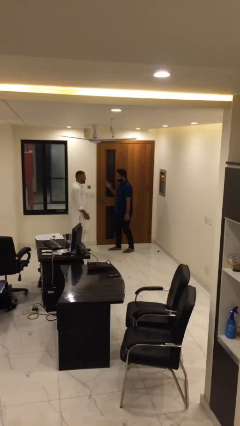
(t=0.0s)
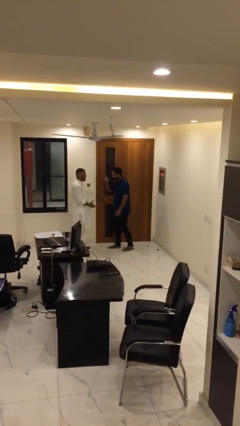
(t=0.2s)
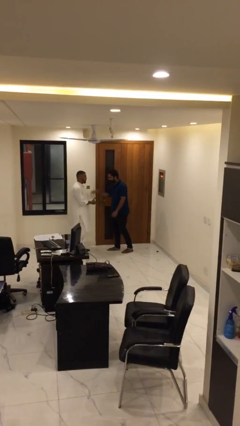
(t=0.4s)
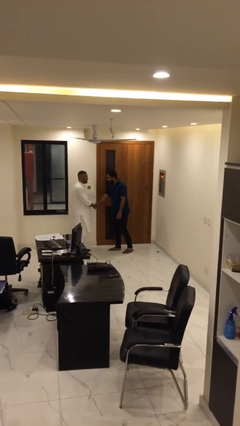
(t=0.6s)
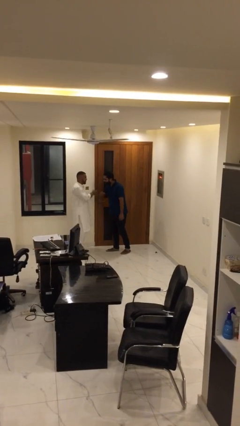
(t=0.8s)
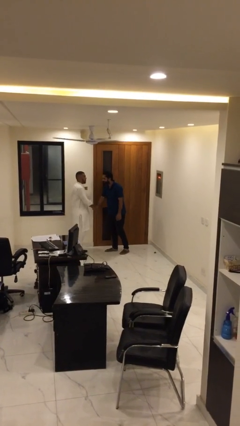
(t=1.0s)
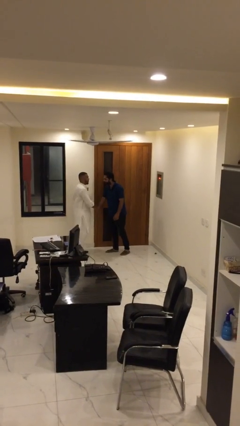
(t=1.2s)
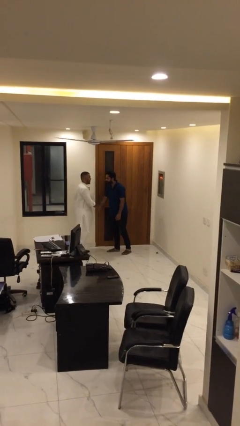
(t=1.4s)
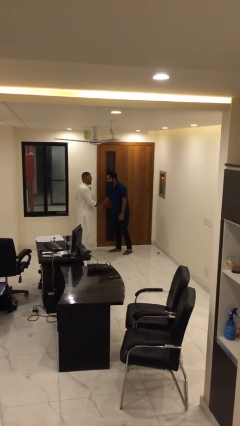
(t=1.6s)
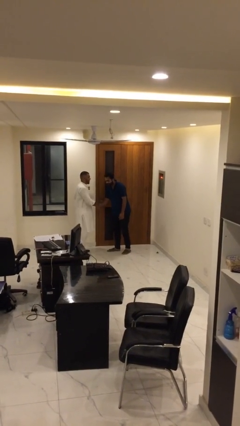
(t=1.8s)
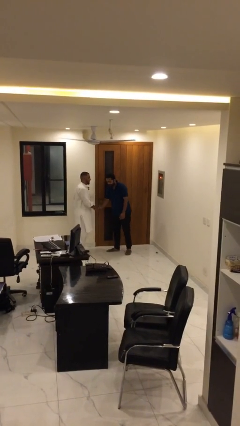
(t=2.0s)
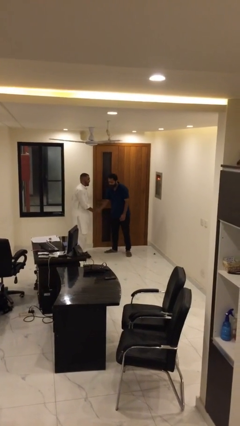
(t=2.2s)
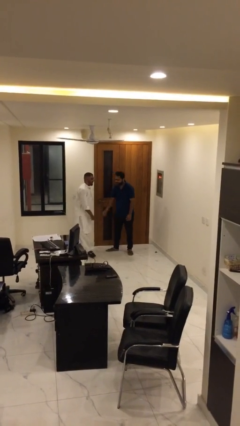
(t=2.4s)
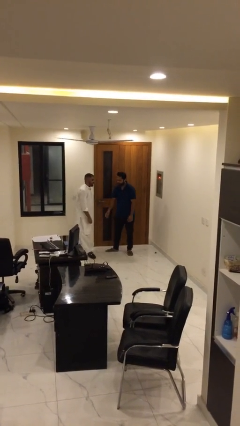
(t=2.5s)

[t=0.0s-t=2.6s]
person shakes hand

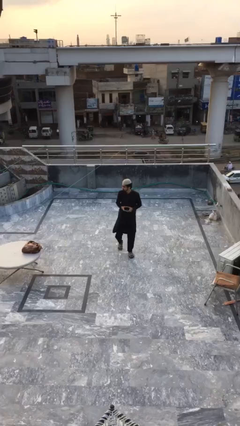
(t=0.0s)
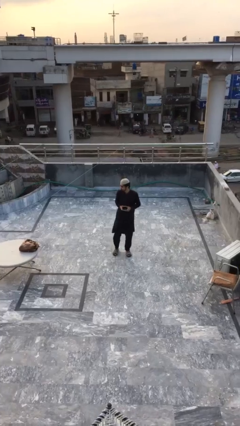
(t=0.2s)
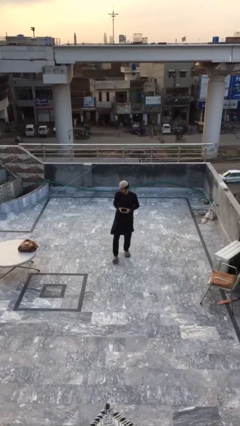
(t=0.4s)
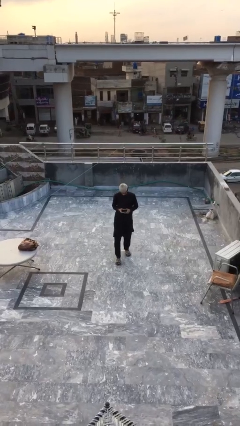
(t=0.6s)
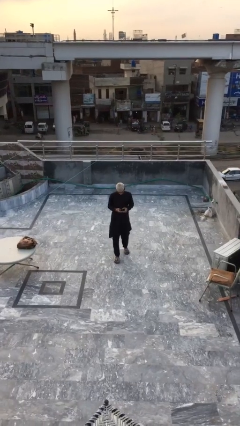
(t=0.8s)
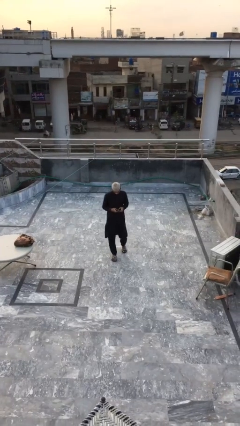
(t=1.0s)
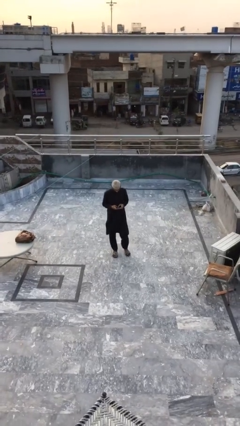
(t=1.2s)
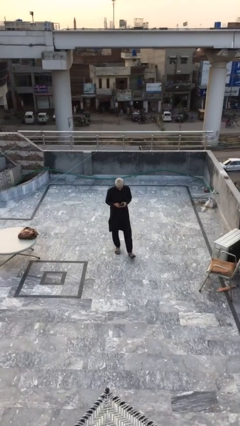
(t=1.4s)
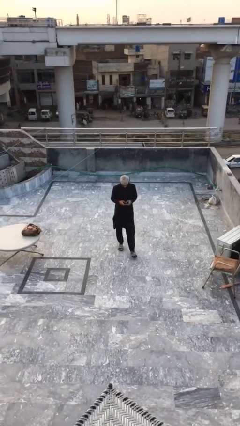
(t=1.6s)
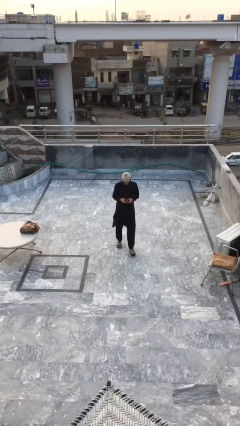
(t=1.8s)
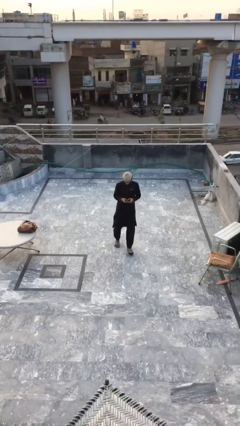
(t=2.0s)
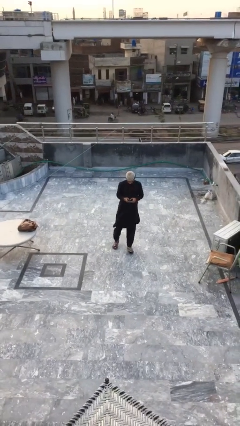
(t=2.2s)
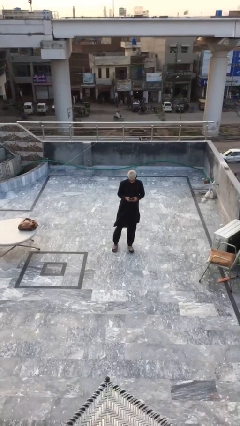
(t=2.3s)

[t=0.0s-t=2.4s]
person texts on phone

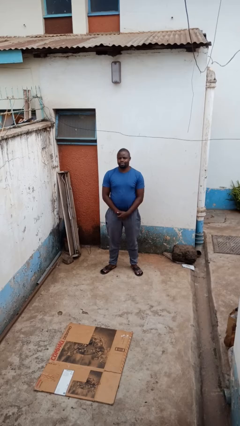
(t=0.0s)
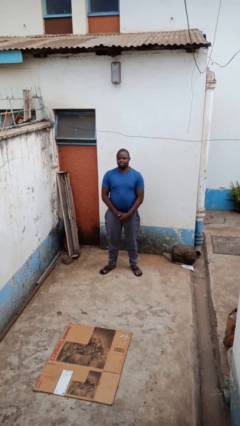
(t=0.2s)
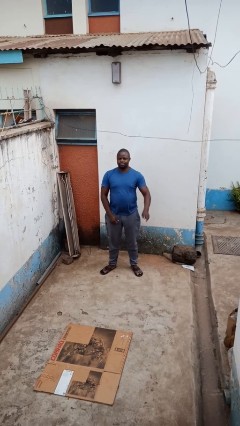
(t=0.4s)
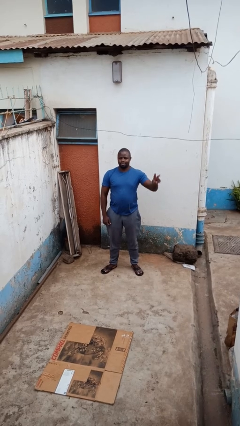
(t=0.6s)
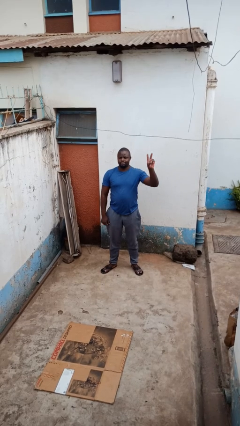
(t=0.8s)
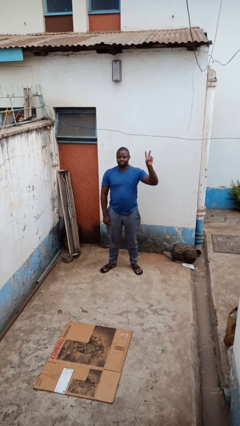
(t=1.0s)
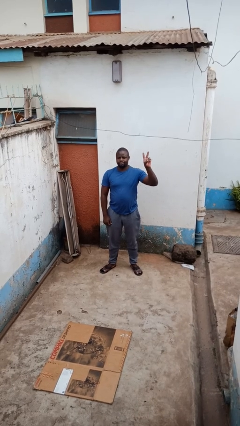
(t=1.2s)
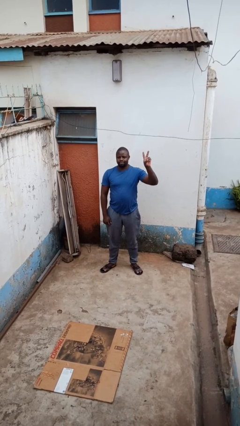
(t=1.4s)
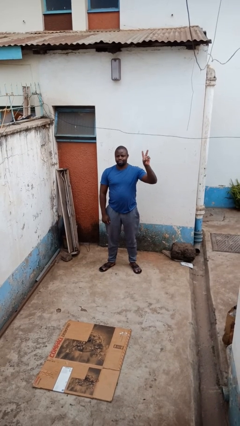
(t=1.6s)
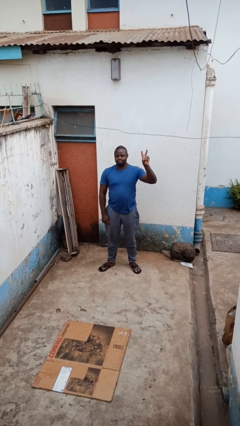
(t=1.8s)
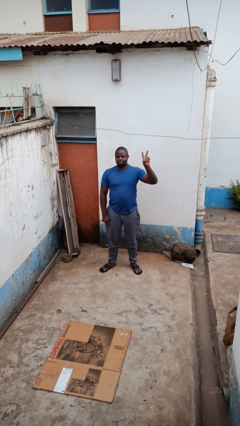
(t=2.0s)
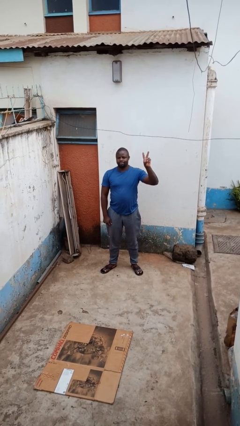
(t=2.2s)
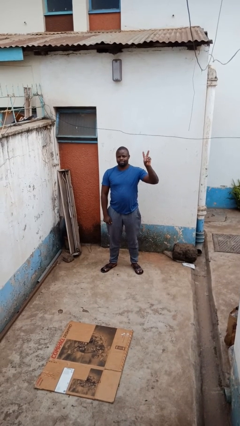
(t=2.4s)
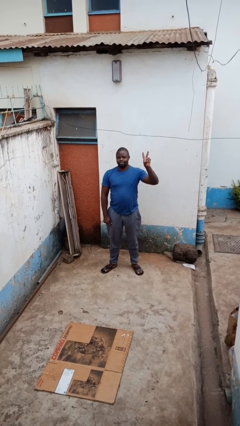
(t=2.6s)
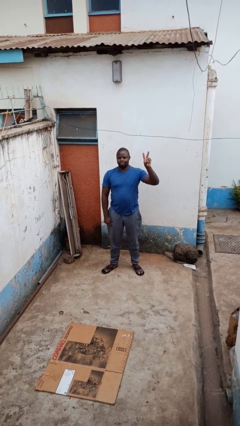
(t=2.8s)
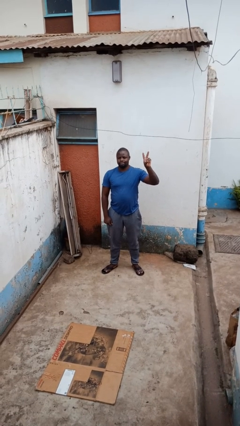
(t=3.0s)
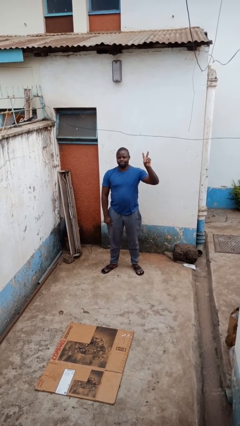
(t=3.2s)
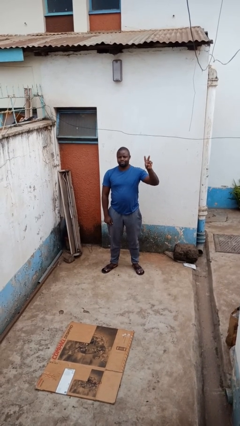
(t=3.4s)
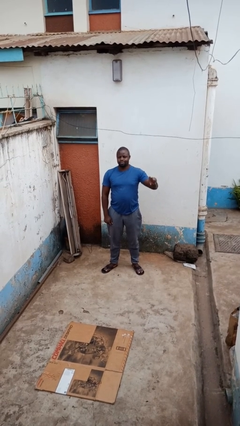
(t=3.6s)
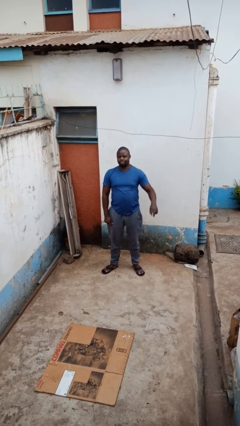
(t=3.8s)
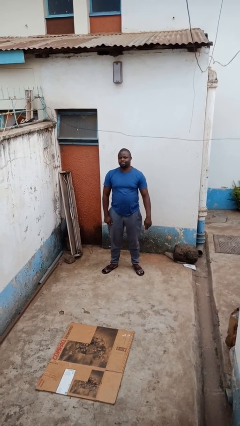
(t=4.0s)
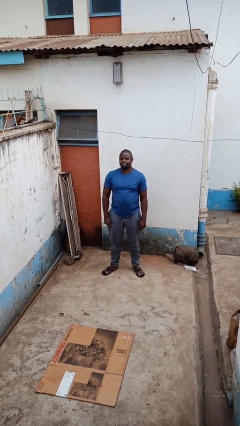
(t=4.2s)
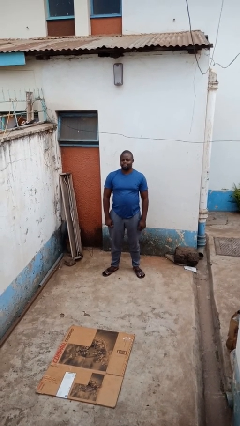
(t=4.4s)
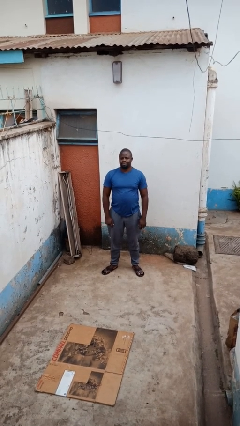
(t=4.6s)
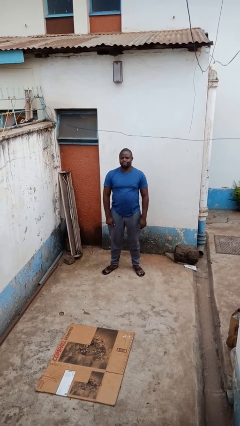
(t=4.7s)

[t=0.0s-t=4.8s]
person gestures peace

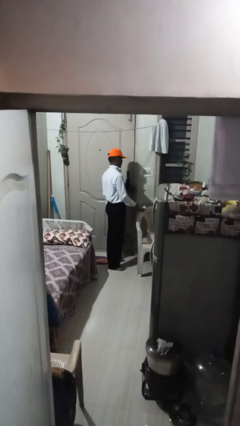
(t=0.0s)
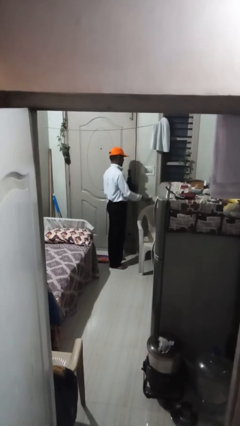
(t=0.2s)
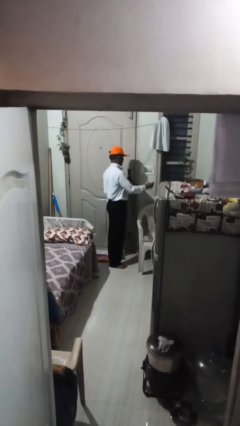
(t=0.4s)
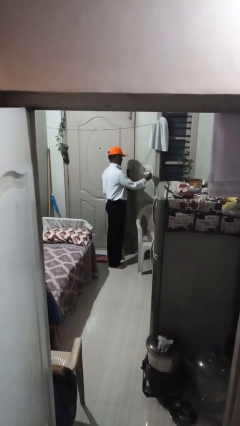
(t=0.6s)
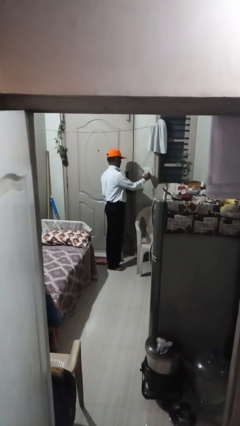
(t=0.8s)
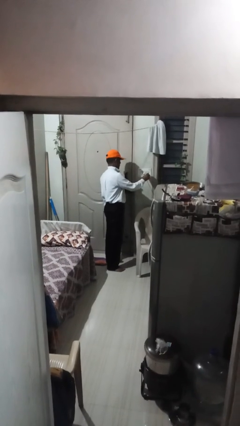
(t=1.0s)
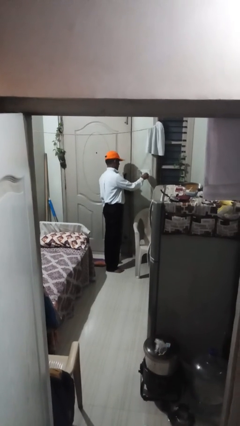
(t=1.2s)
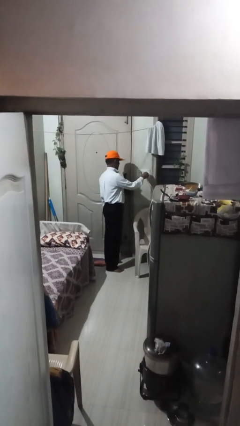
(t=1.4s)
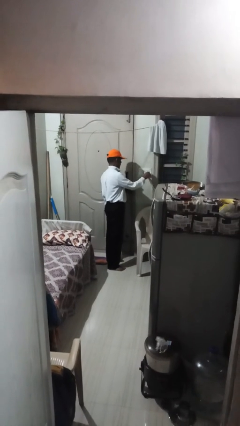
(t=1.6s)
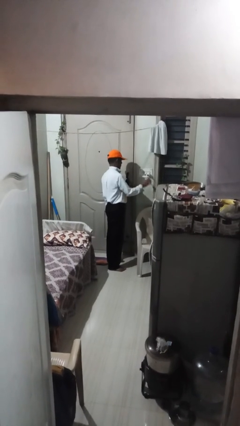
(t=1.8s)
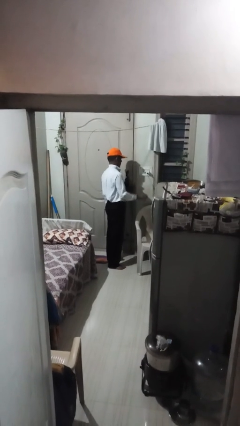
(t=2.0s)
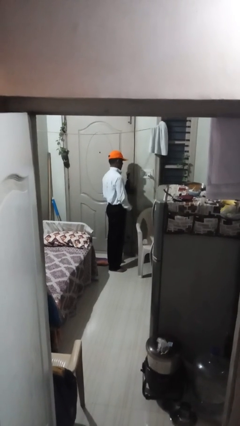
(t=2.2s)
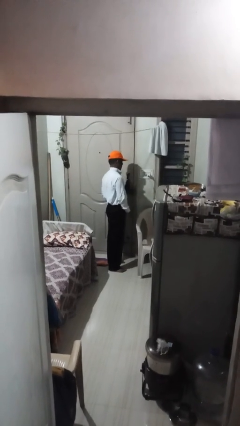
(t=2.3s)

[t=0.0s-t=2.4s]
person plugs into electrical socket

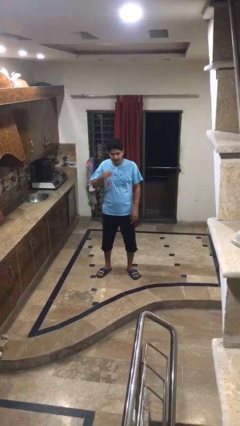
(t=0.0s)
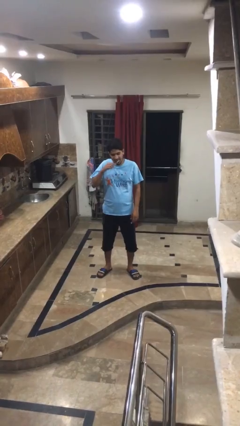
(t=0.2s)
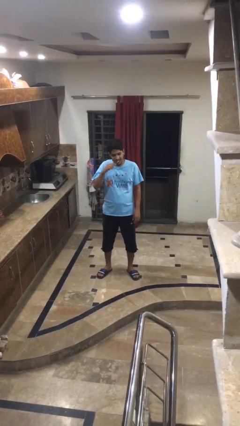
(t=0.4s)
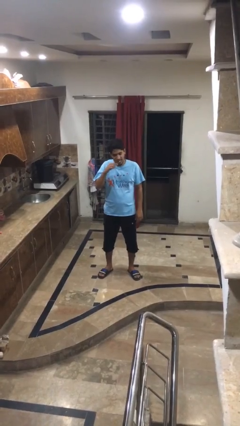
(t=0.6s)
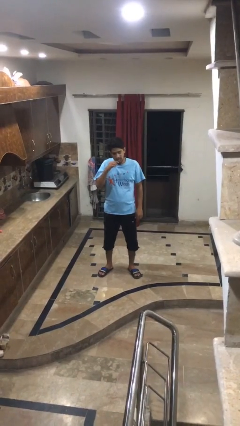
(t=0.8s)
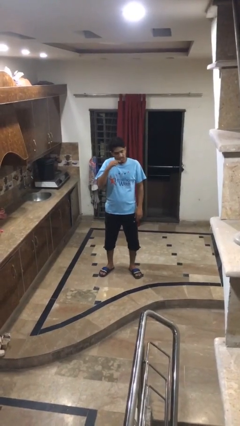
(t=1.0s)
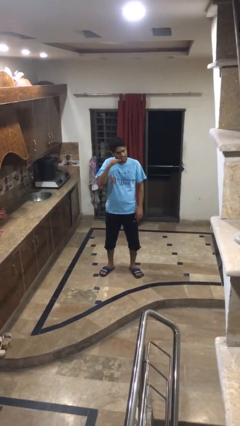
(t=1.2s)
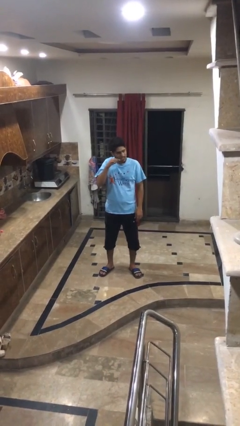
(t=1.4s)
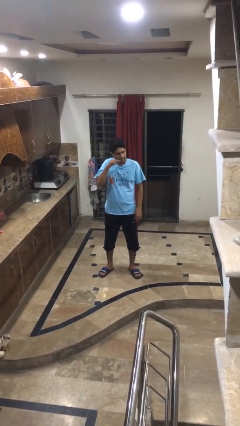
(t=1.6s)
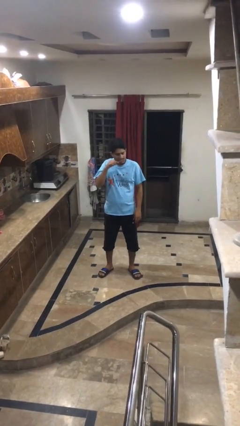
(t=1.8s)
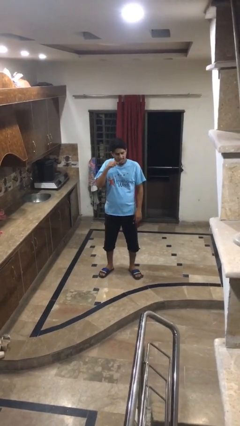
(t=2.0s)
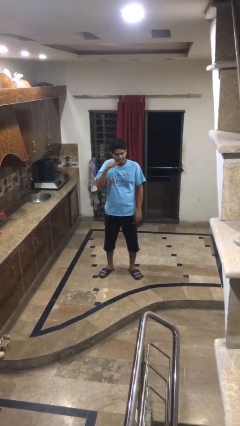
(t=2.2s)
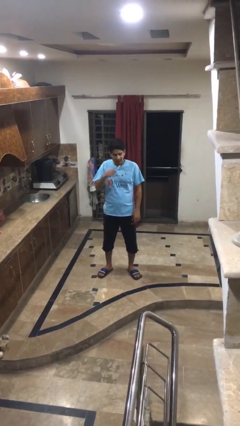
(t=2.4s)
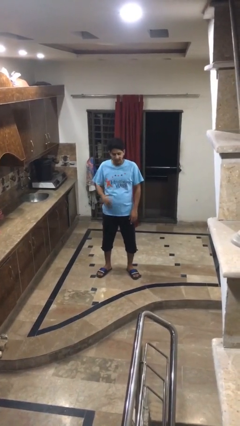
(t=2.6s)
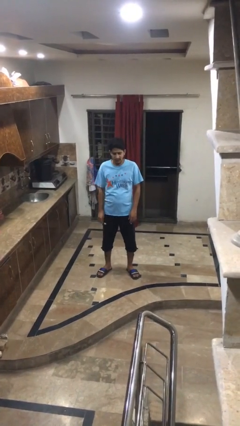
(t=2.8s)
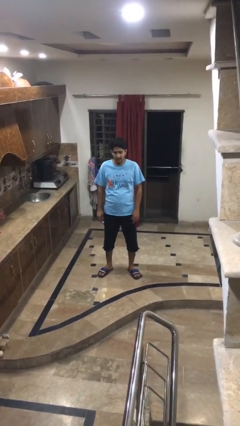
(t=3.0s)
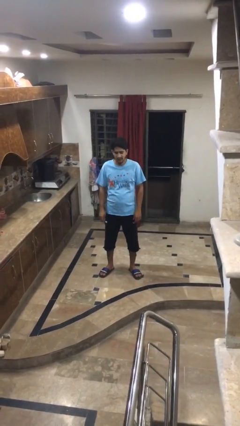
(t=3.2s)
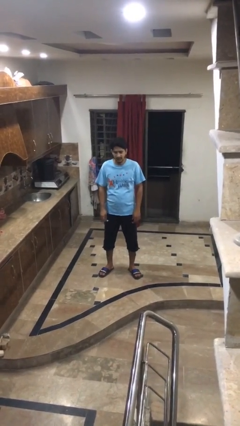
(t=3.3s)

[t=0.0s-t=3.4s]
person brushes teeth

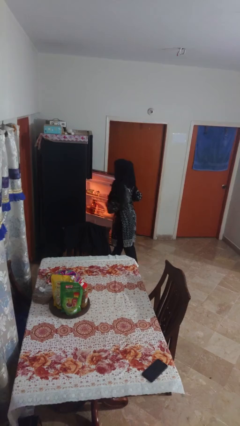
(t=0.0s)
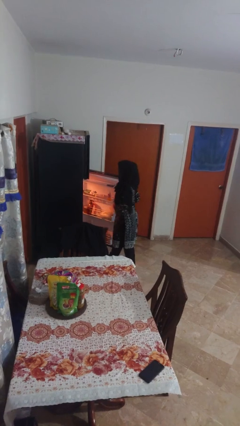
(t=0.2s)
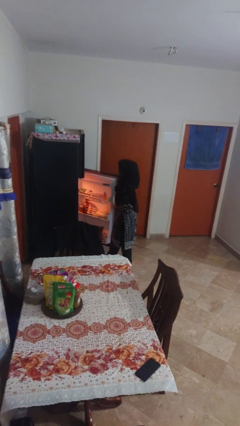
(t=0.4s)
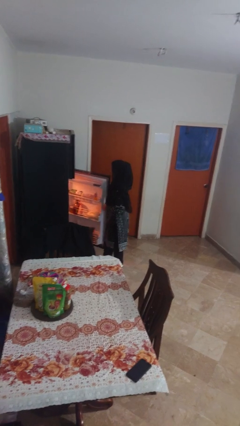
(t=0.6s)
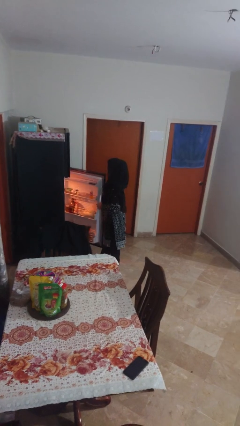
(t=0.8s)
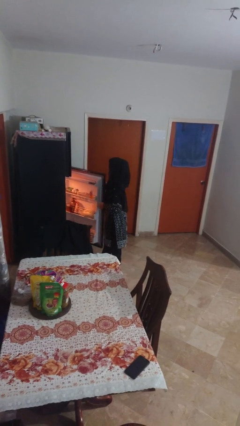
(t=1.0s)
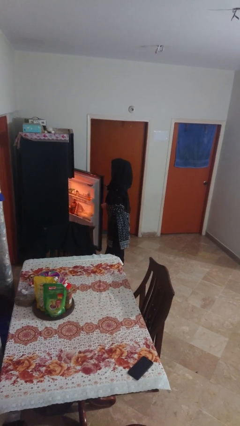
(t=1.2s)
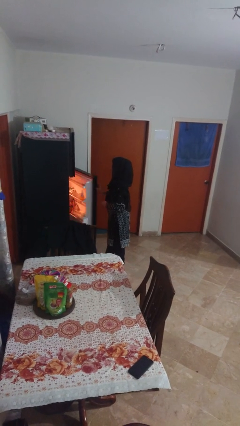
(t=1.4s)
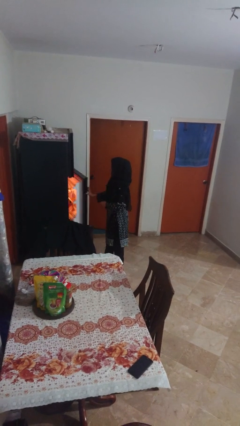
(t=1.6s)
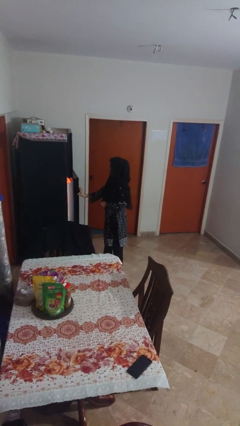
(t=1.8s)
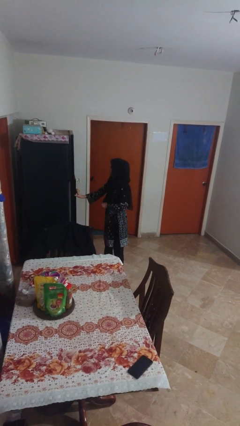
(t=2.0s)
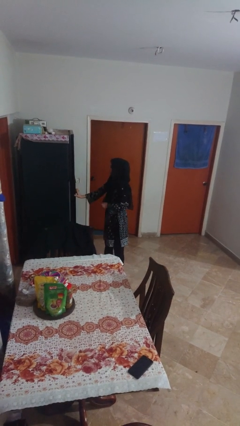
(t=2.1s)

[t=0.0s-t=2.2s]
person closes refrigerator

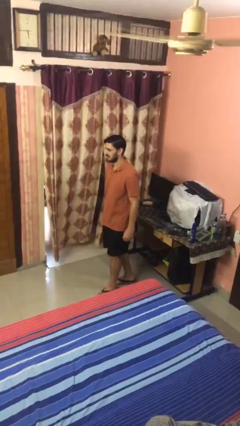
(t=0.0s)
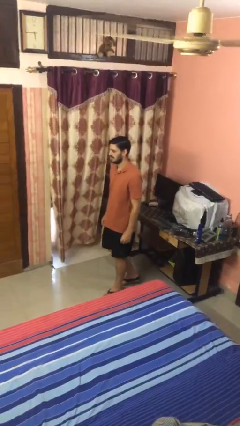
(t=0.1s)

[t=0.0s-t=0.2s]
person bumps into person
